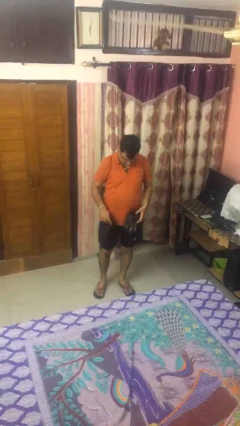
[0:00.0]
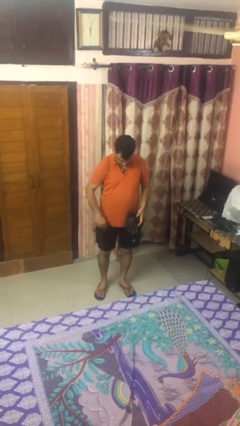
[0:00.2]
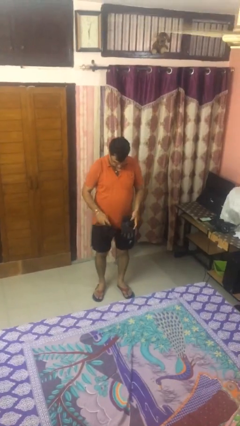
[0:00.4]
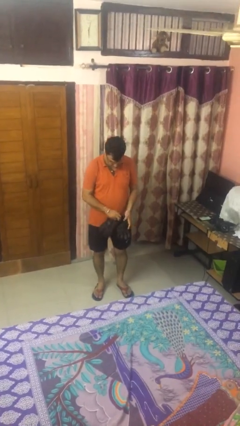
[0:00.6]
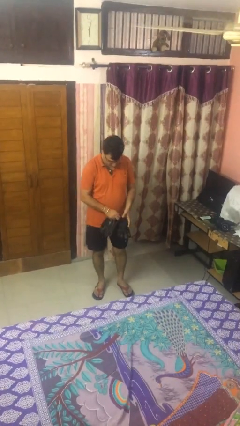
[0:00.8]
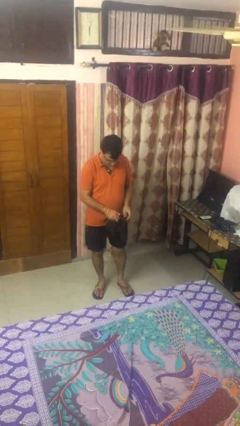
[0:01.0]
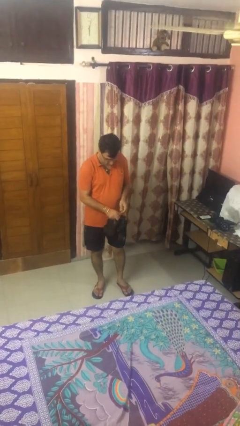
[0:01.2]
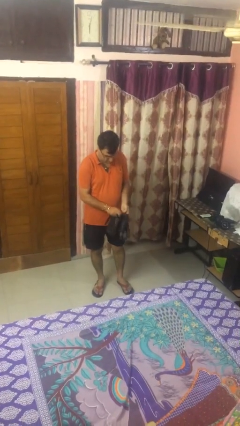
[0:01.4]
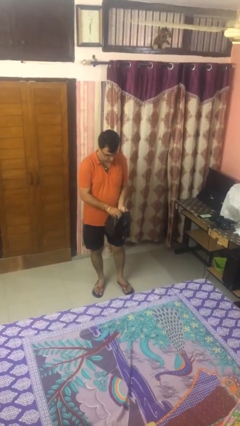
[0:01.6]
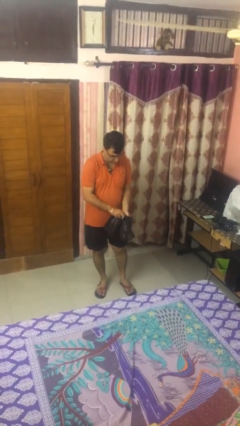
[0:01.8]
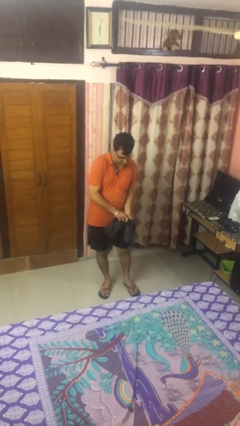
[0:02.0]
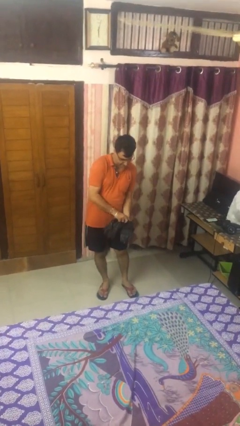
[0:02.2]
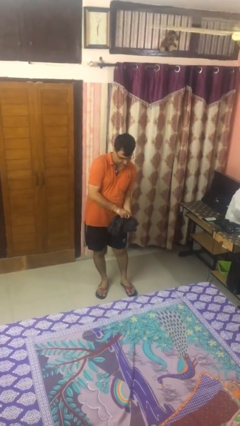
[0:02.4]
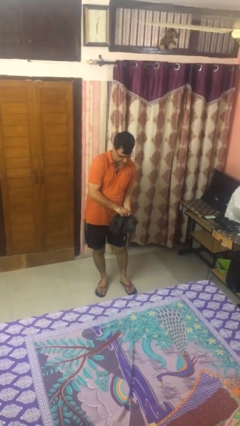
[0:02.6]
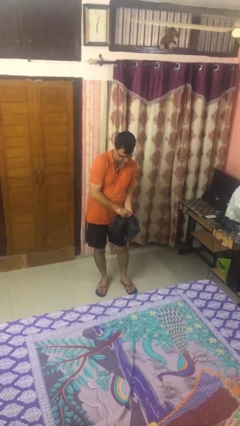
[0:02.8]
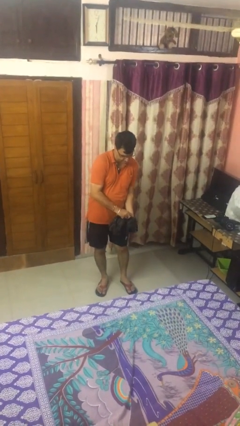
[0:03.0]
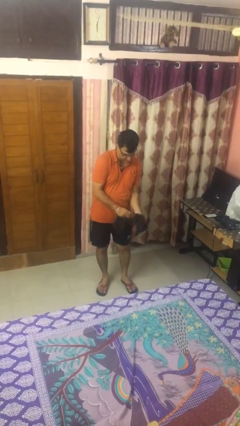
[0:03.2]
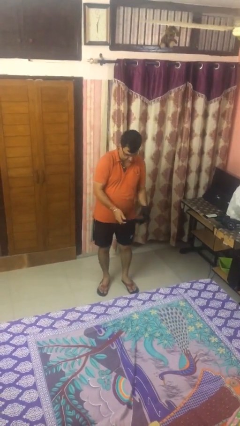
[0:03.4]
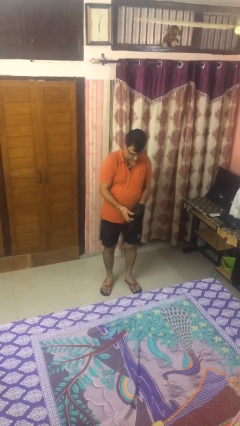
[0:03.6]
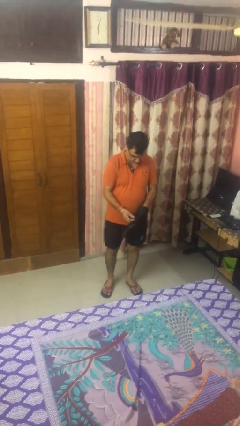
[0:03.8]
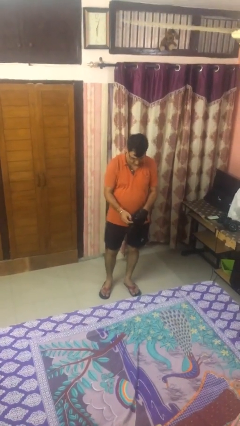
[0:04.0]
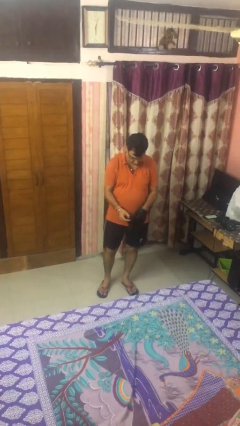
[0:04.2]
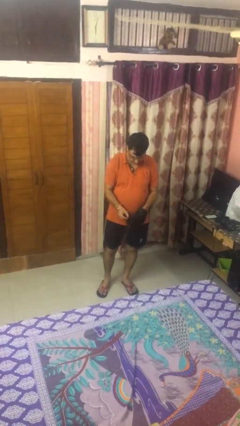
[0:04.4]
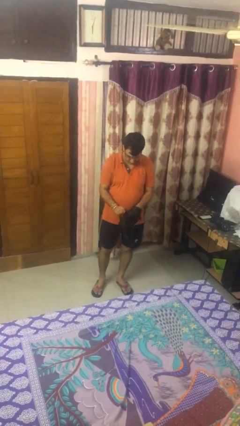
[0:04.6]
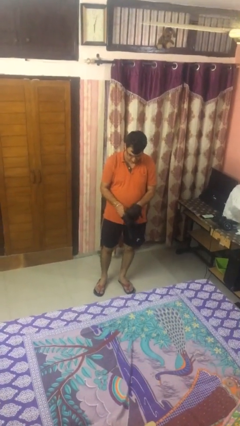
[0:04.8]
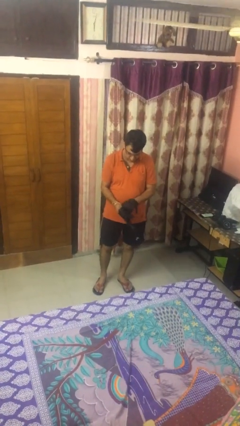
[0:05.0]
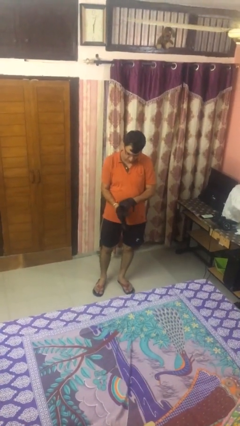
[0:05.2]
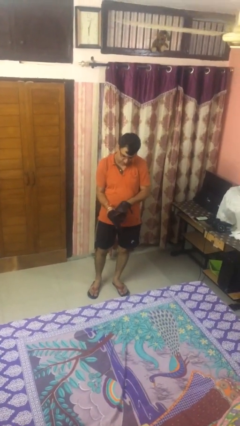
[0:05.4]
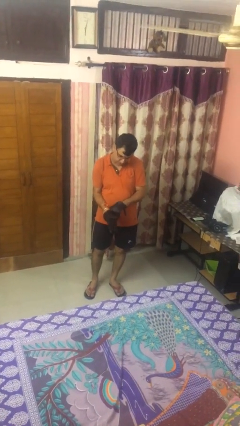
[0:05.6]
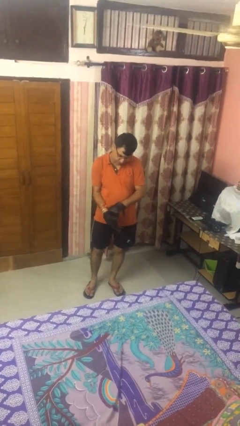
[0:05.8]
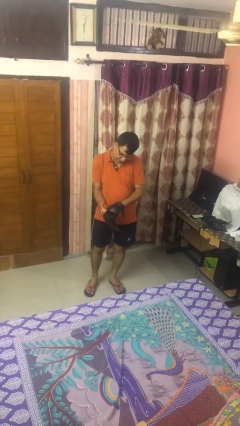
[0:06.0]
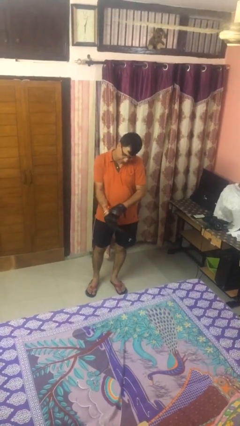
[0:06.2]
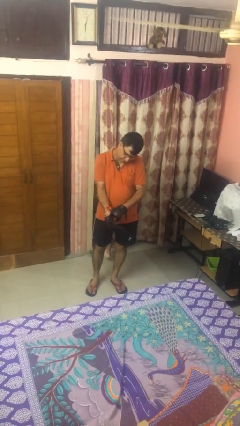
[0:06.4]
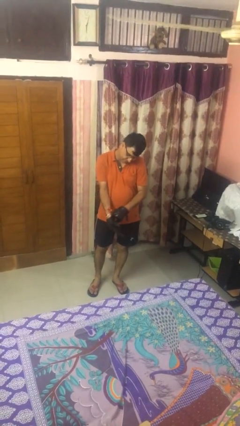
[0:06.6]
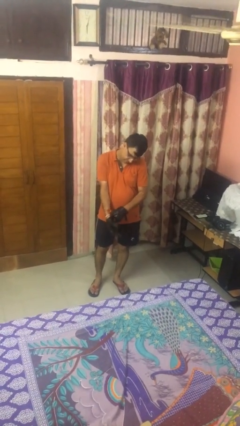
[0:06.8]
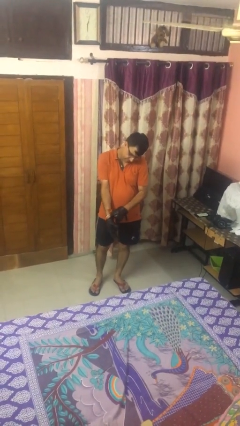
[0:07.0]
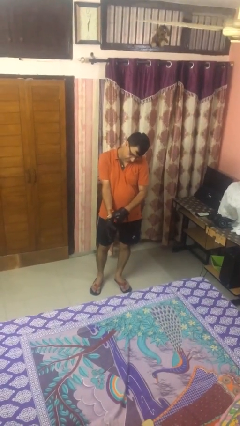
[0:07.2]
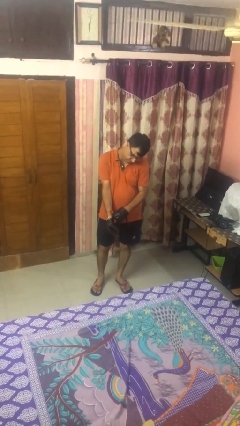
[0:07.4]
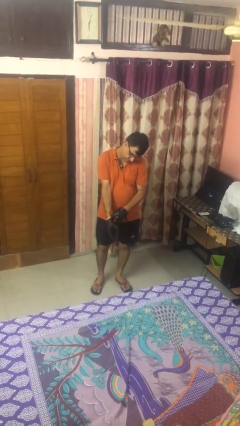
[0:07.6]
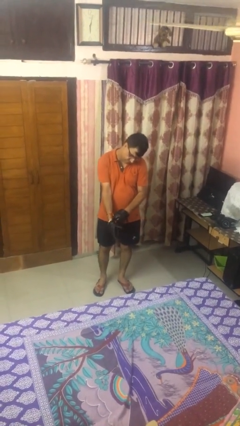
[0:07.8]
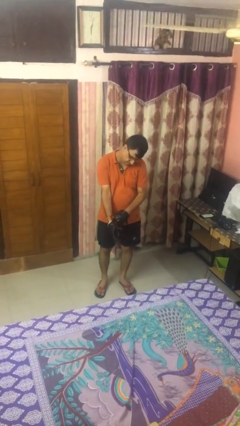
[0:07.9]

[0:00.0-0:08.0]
person puts on gloves

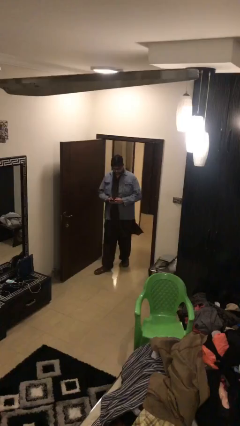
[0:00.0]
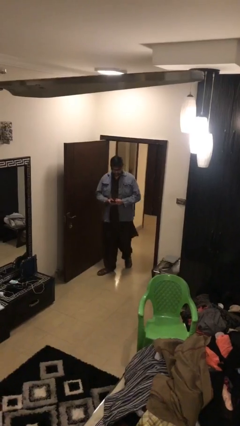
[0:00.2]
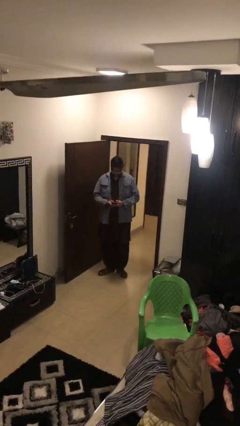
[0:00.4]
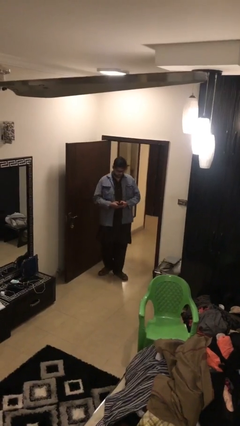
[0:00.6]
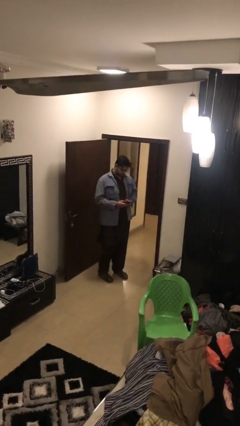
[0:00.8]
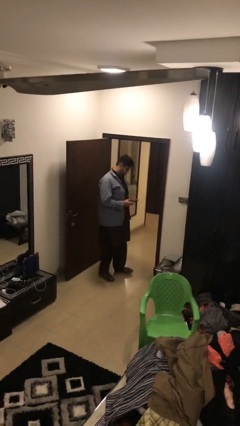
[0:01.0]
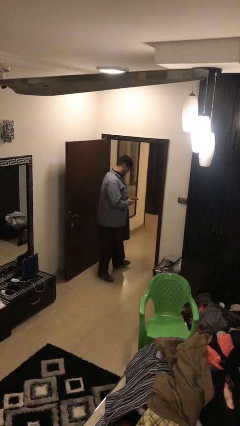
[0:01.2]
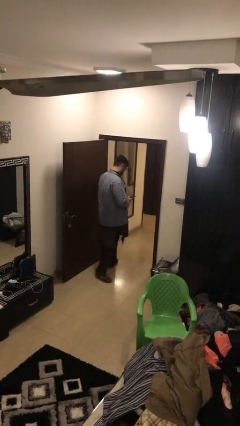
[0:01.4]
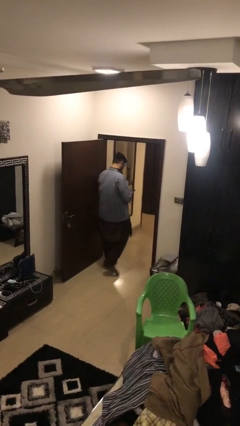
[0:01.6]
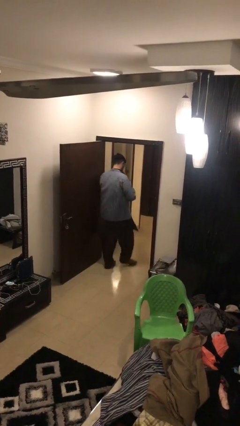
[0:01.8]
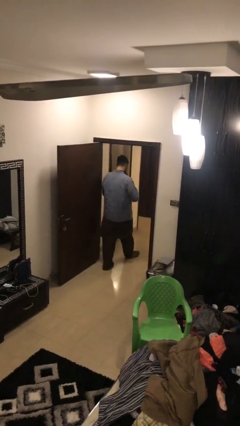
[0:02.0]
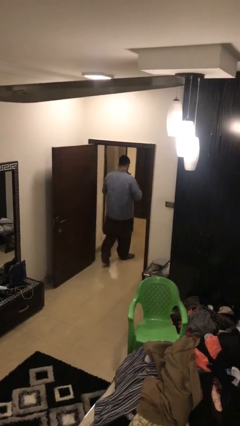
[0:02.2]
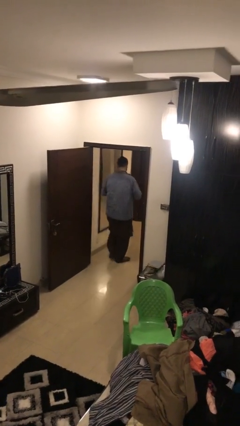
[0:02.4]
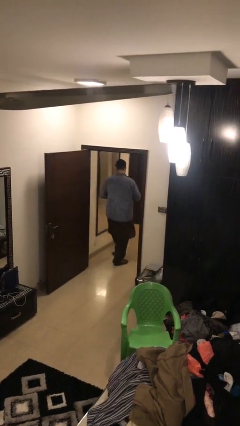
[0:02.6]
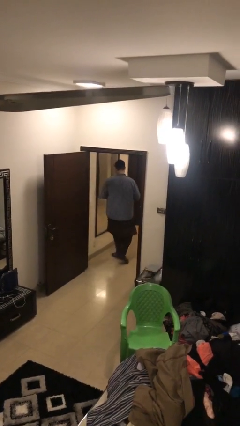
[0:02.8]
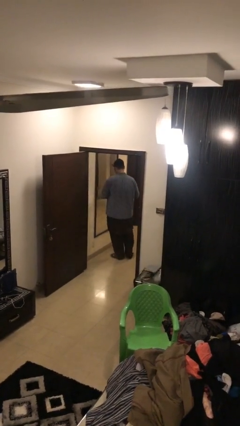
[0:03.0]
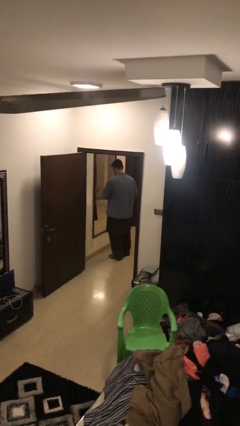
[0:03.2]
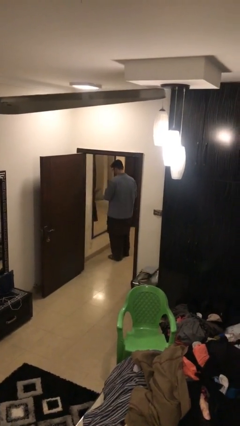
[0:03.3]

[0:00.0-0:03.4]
person exits scene through structure

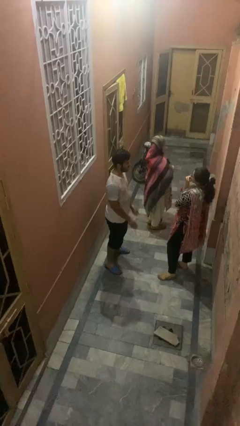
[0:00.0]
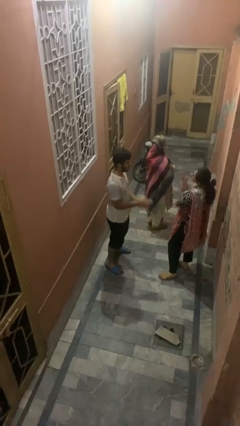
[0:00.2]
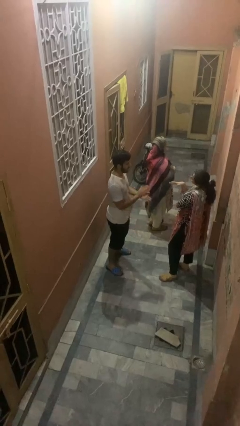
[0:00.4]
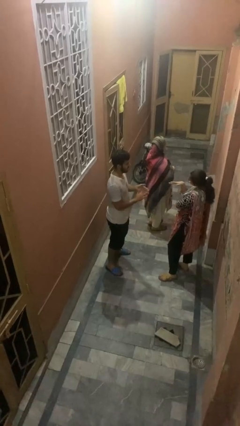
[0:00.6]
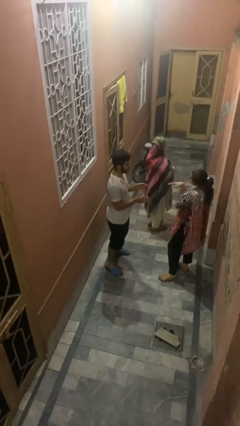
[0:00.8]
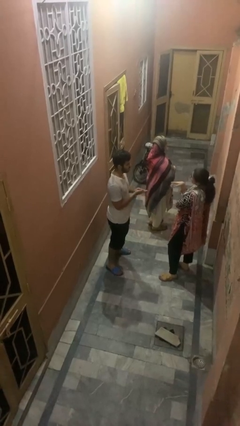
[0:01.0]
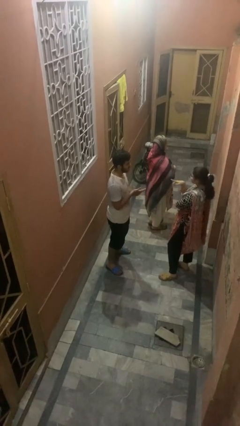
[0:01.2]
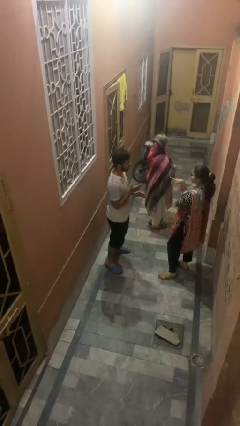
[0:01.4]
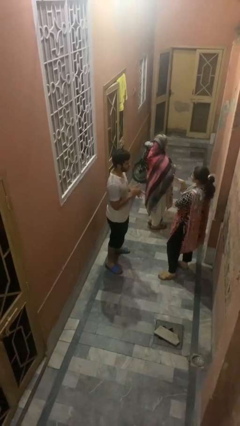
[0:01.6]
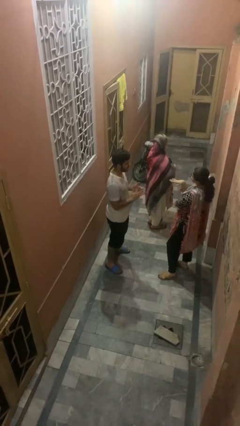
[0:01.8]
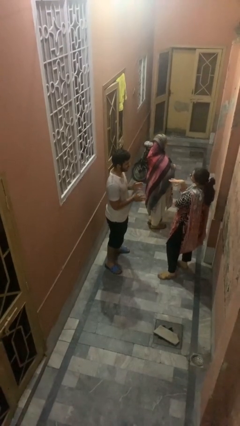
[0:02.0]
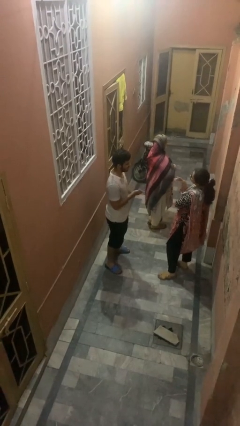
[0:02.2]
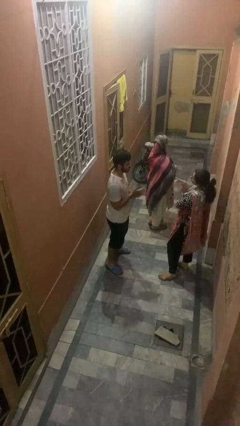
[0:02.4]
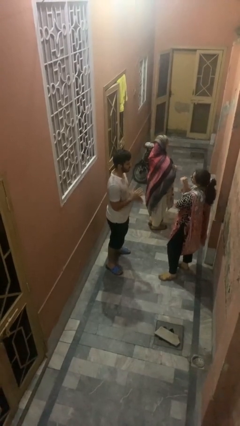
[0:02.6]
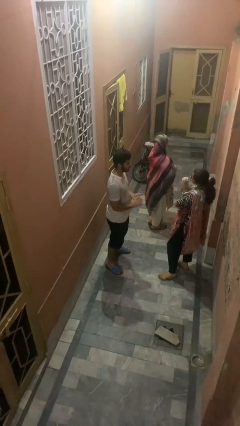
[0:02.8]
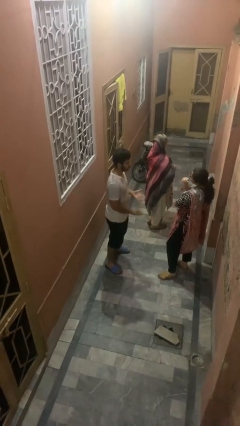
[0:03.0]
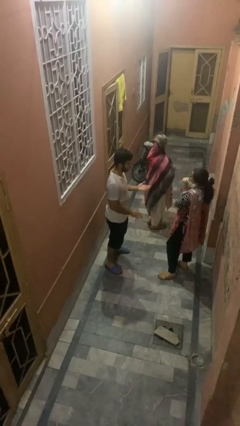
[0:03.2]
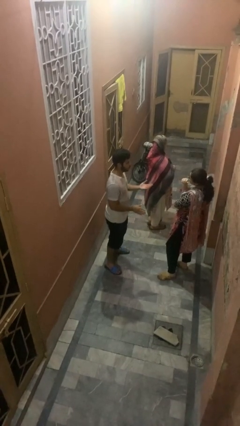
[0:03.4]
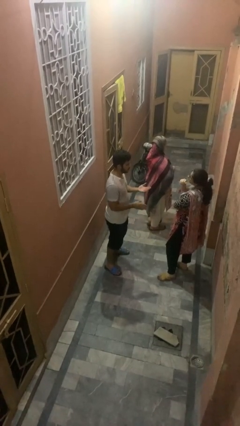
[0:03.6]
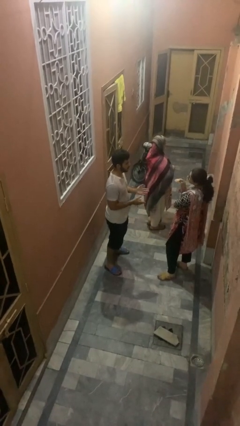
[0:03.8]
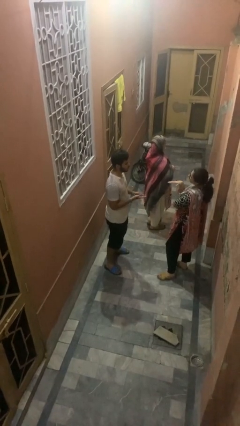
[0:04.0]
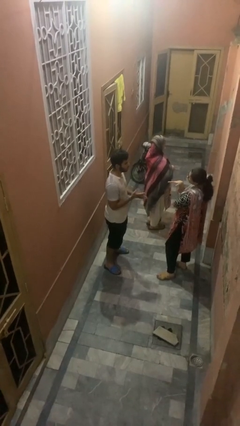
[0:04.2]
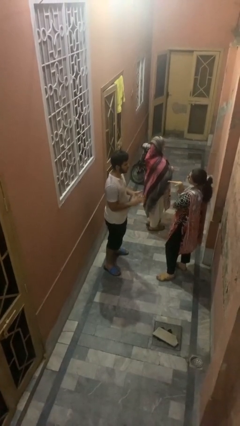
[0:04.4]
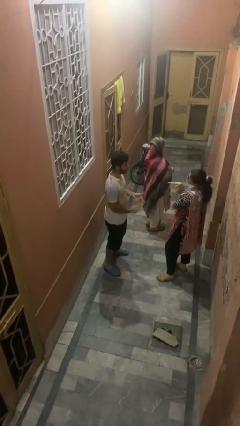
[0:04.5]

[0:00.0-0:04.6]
person talks to person

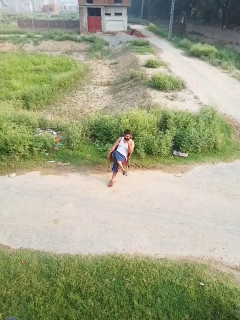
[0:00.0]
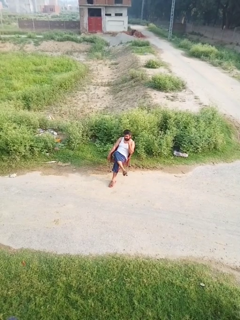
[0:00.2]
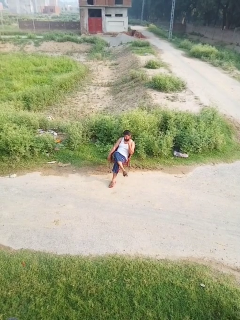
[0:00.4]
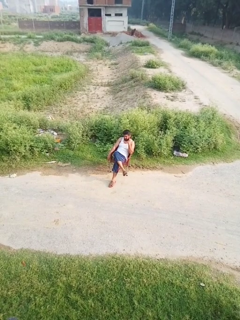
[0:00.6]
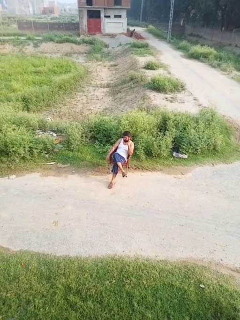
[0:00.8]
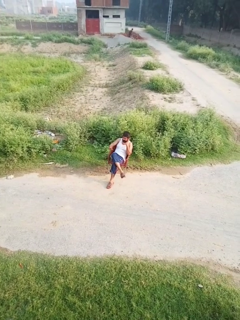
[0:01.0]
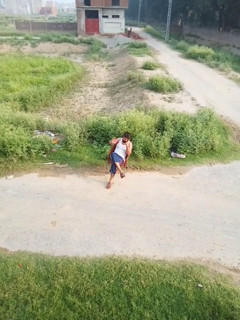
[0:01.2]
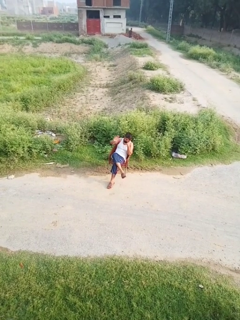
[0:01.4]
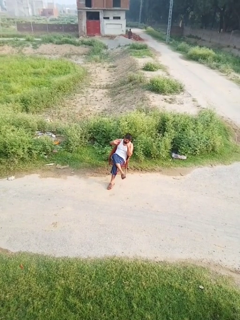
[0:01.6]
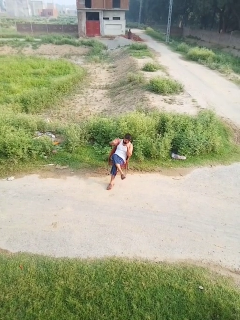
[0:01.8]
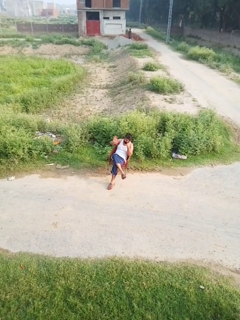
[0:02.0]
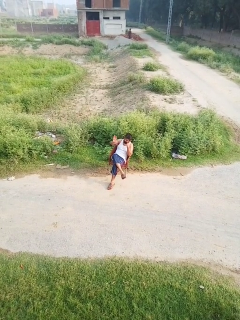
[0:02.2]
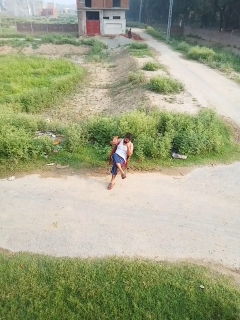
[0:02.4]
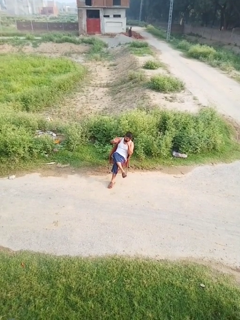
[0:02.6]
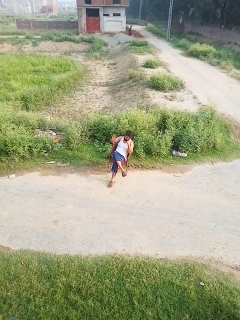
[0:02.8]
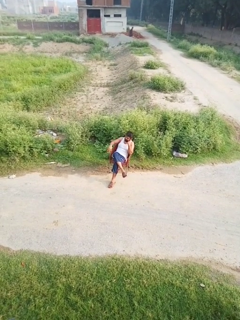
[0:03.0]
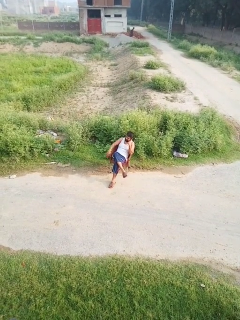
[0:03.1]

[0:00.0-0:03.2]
person waves at person
